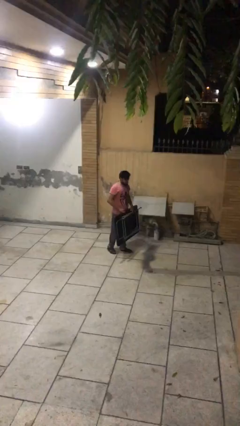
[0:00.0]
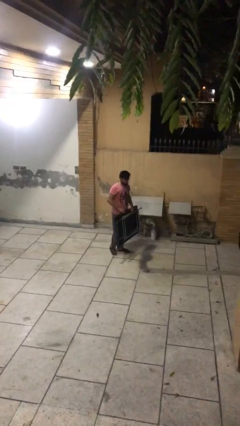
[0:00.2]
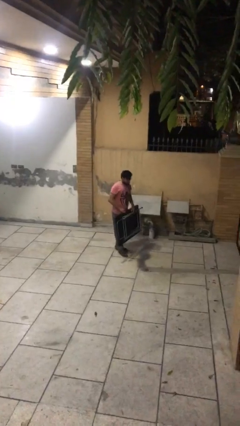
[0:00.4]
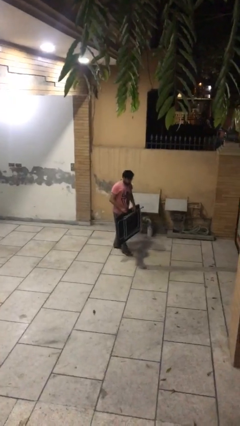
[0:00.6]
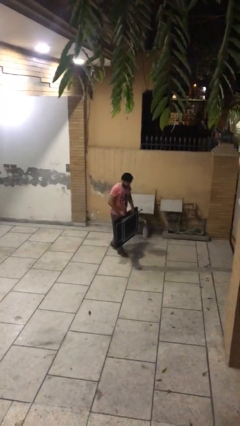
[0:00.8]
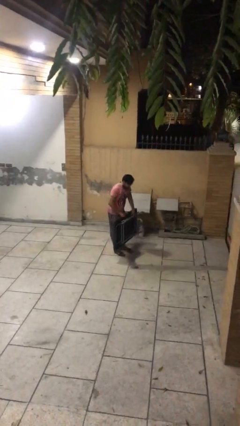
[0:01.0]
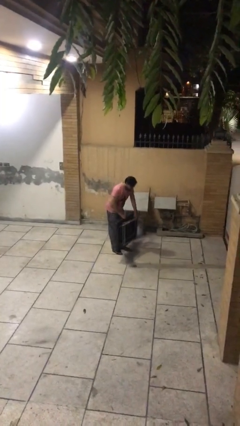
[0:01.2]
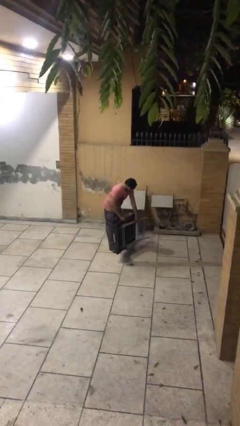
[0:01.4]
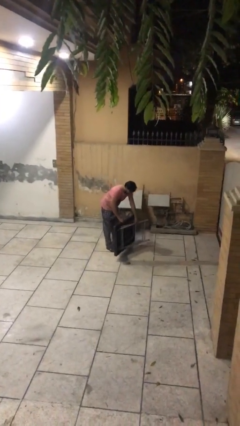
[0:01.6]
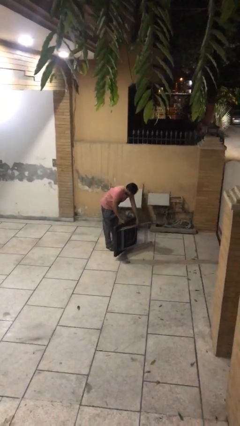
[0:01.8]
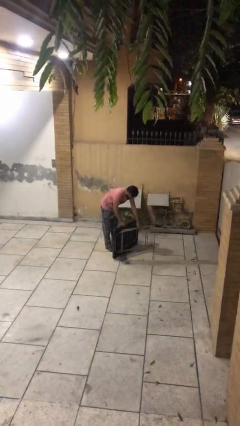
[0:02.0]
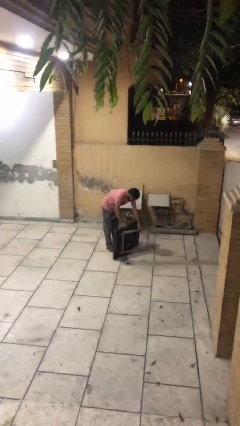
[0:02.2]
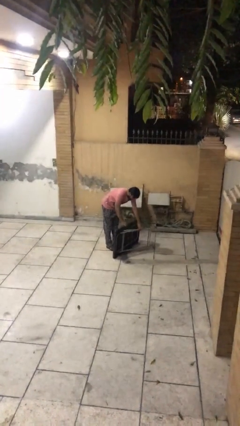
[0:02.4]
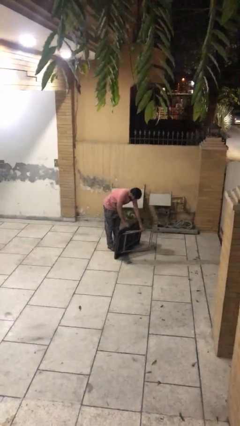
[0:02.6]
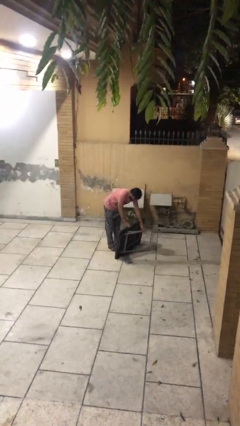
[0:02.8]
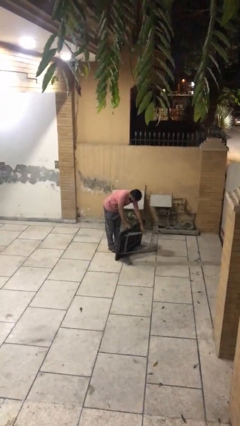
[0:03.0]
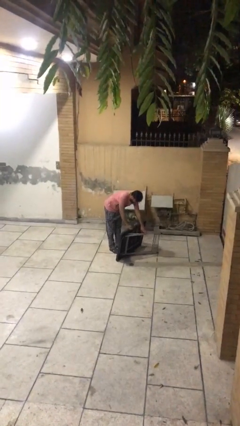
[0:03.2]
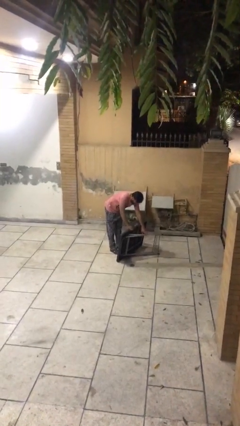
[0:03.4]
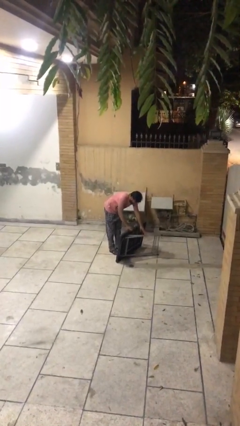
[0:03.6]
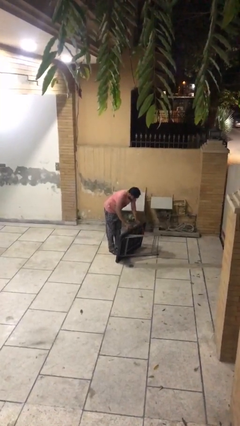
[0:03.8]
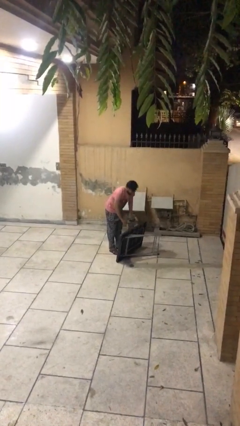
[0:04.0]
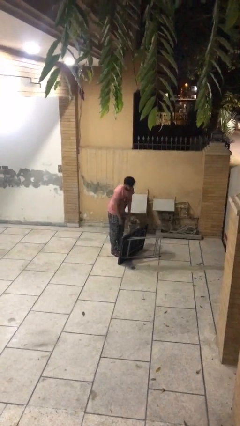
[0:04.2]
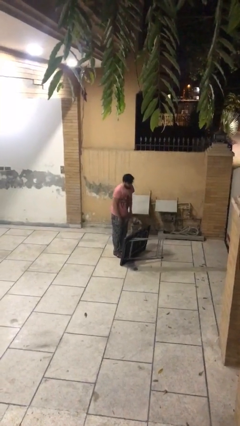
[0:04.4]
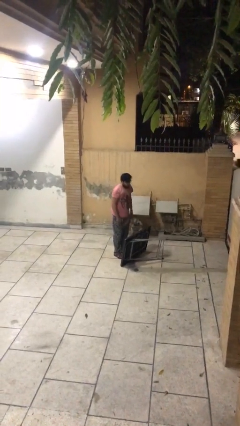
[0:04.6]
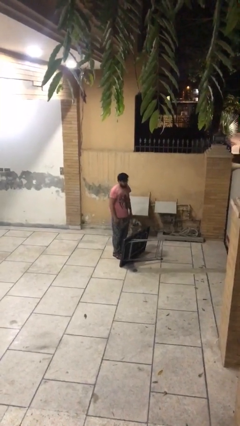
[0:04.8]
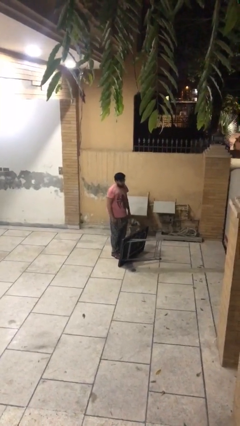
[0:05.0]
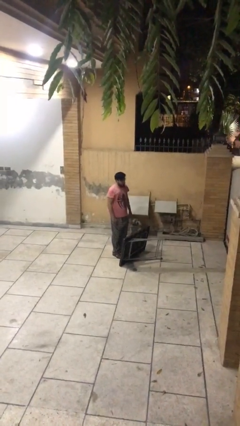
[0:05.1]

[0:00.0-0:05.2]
person puts down object on floor

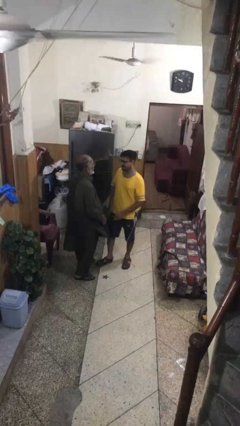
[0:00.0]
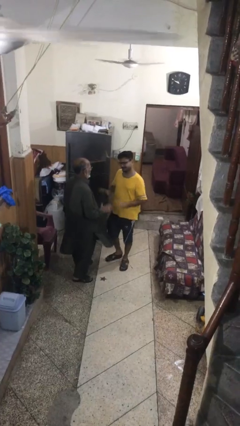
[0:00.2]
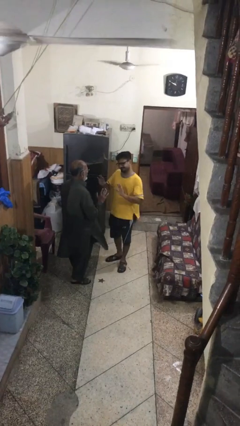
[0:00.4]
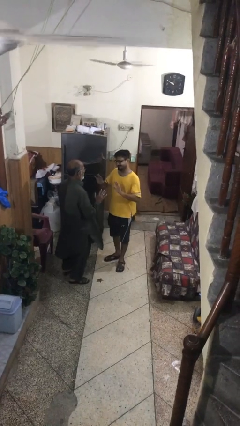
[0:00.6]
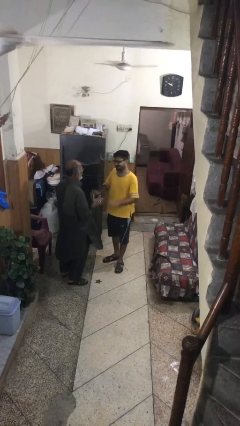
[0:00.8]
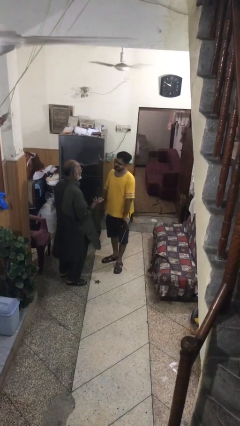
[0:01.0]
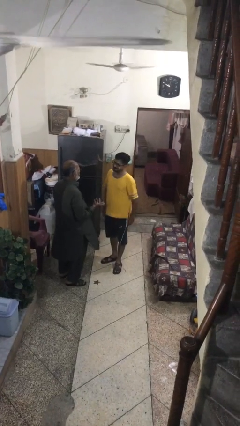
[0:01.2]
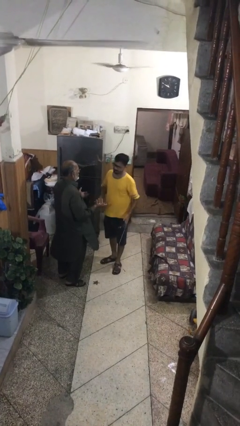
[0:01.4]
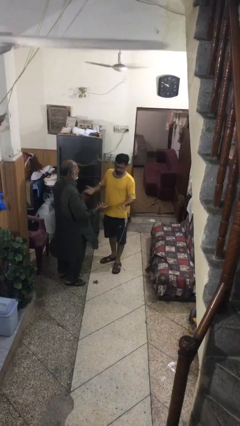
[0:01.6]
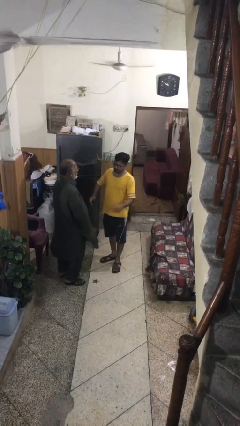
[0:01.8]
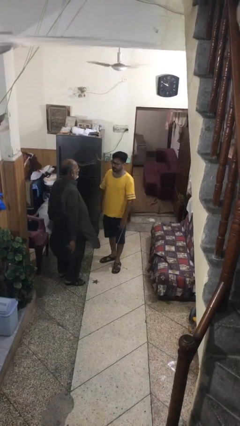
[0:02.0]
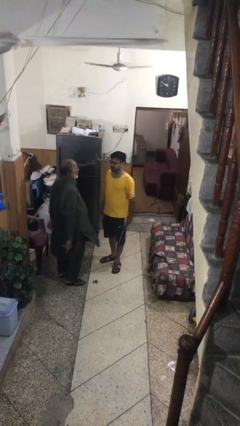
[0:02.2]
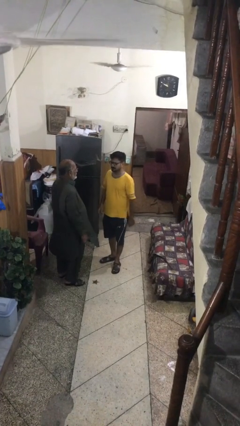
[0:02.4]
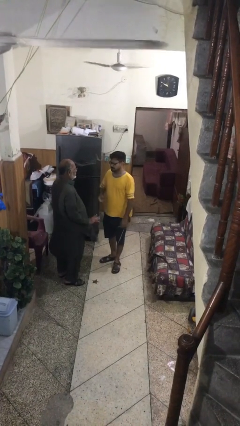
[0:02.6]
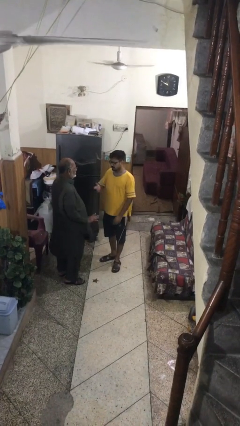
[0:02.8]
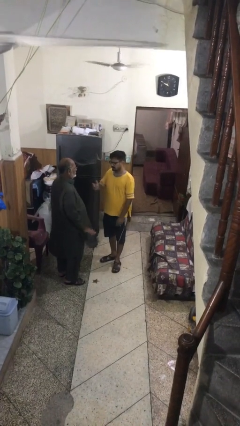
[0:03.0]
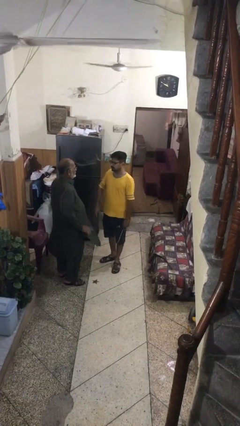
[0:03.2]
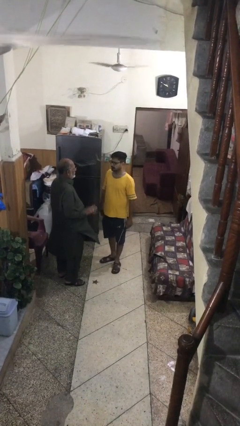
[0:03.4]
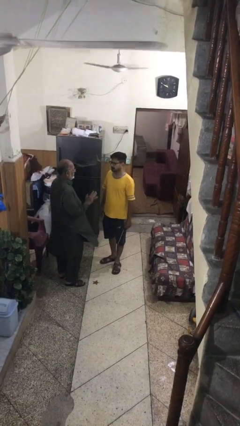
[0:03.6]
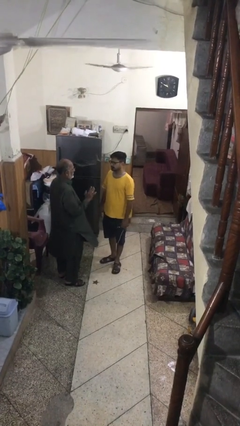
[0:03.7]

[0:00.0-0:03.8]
person talks to person

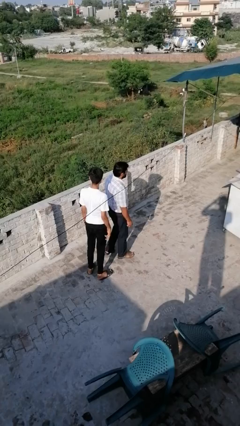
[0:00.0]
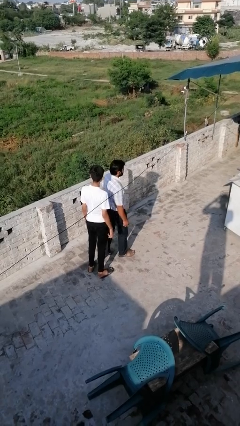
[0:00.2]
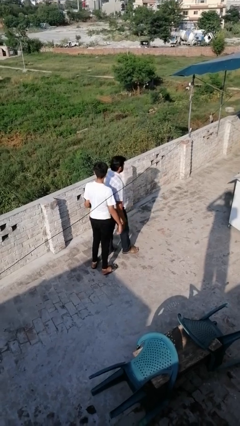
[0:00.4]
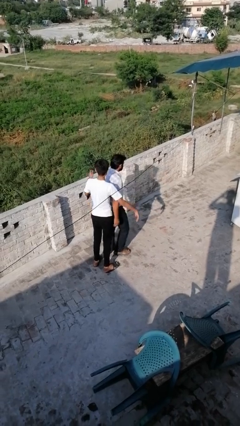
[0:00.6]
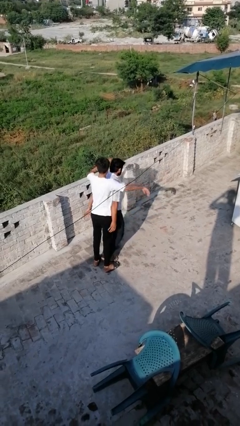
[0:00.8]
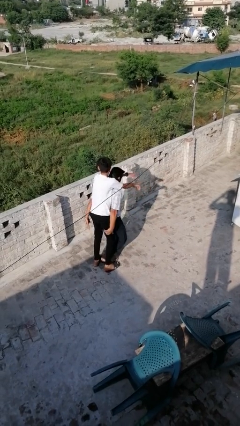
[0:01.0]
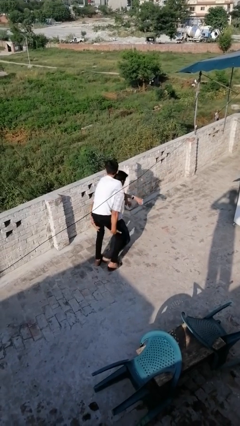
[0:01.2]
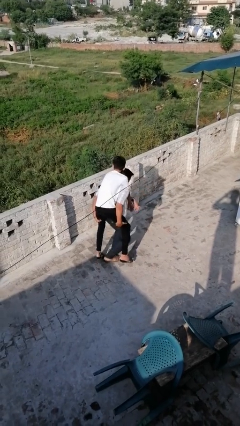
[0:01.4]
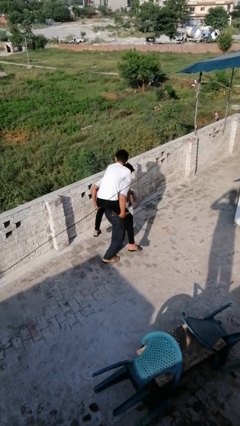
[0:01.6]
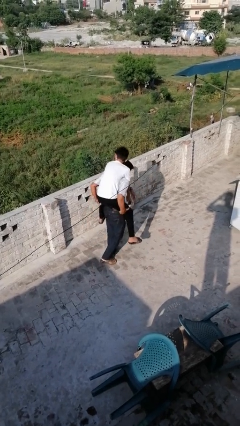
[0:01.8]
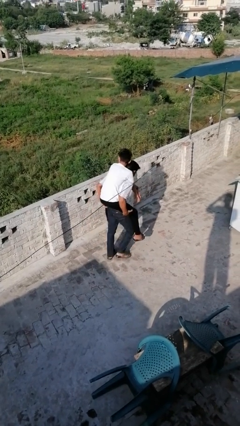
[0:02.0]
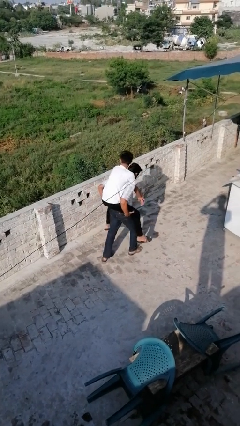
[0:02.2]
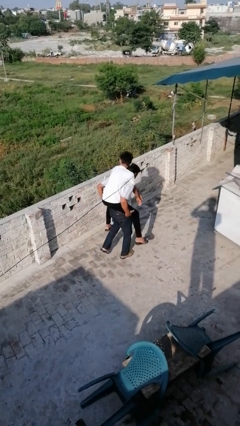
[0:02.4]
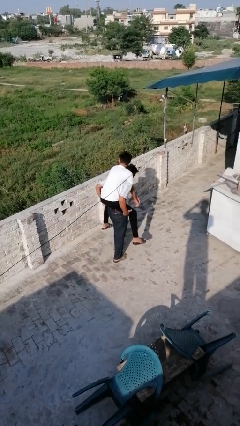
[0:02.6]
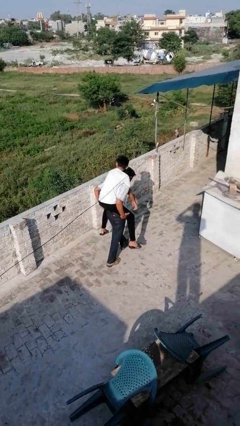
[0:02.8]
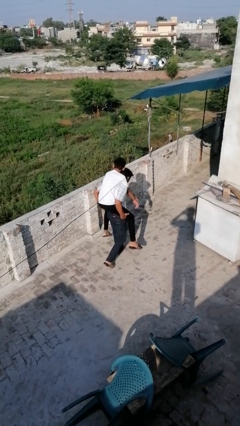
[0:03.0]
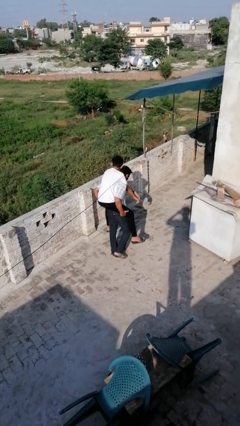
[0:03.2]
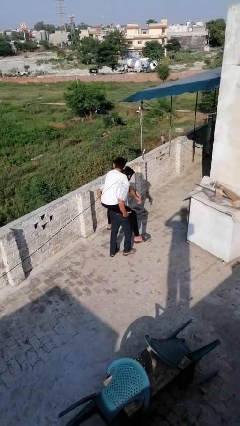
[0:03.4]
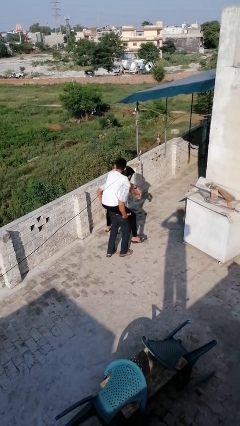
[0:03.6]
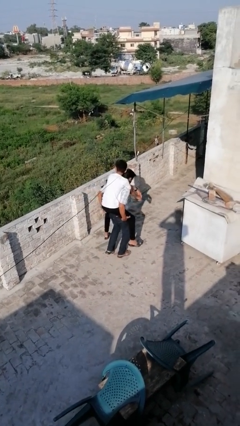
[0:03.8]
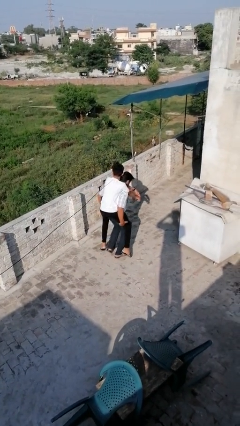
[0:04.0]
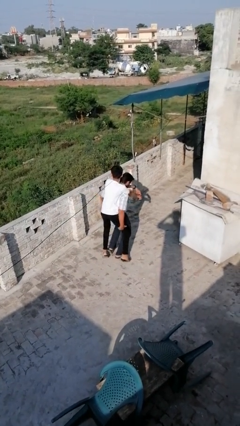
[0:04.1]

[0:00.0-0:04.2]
person carries person on back

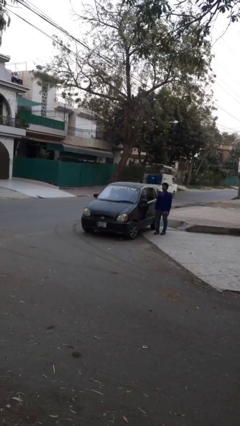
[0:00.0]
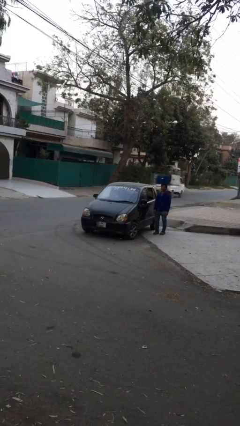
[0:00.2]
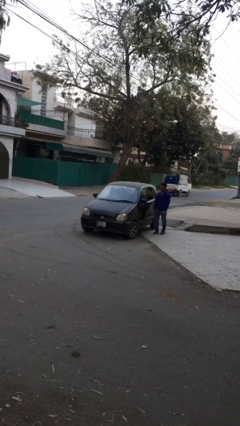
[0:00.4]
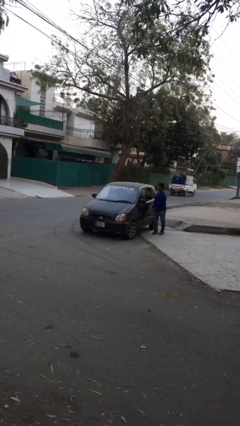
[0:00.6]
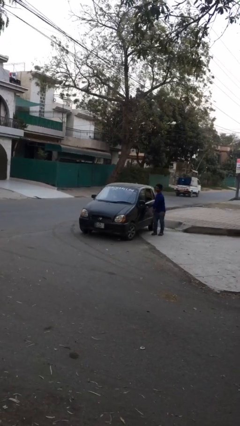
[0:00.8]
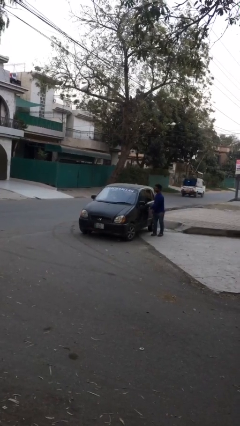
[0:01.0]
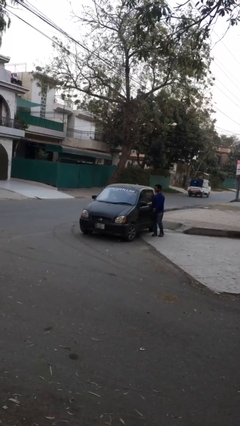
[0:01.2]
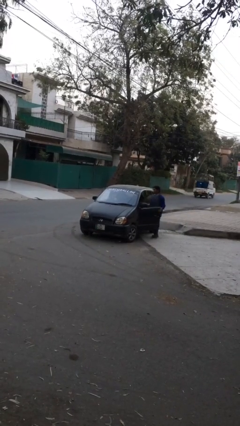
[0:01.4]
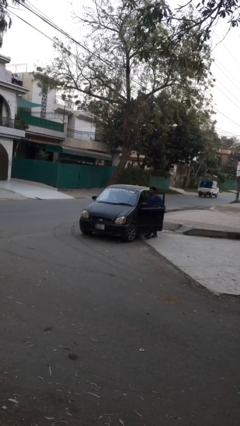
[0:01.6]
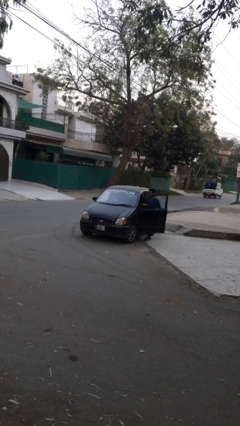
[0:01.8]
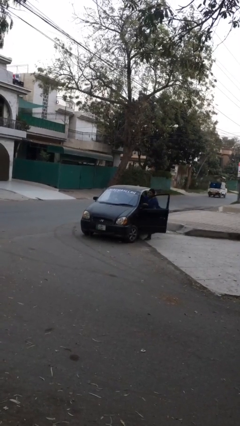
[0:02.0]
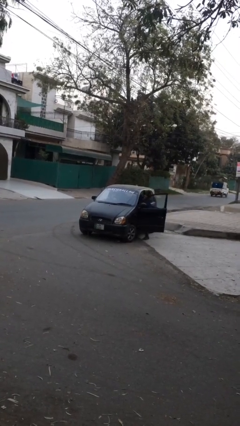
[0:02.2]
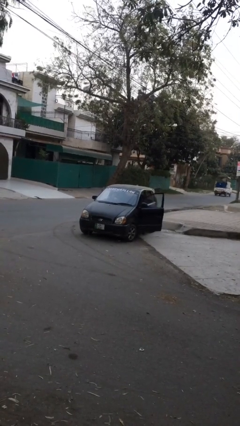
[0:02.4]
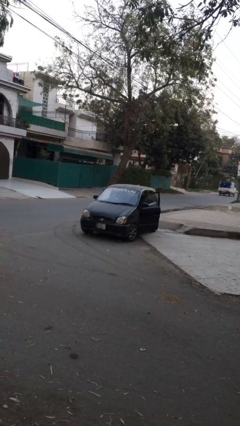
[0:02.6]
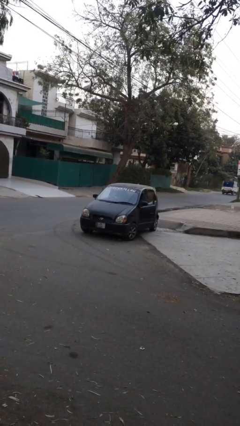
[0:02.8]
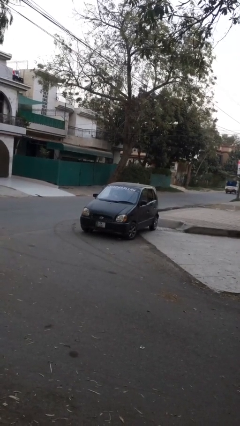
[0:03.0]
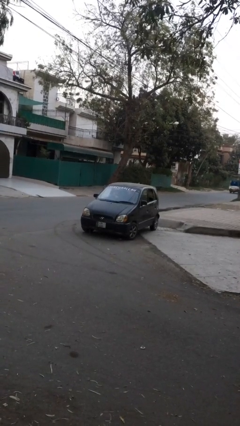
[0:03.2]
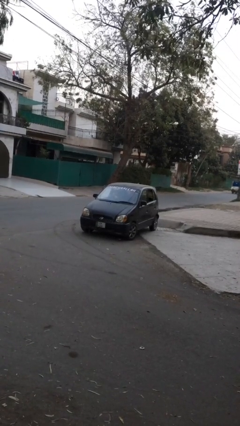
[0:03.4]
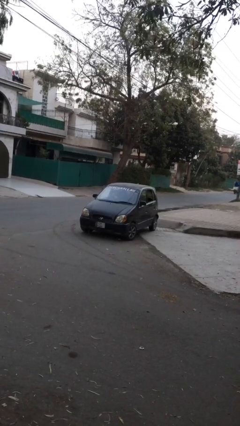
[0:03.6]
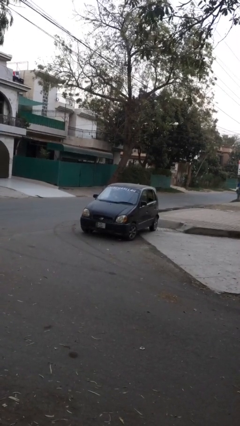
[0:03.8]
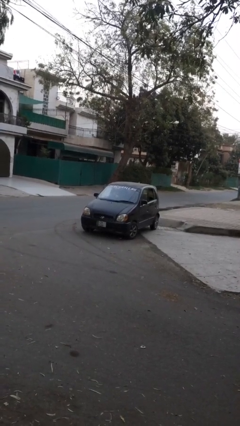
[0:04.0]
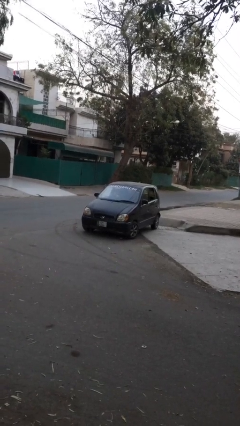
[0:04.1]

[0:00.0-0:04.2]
car picks up person
